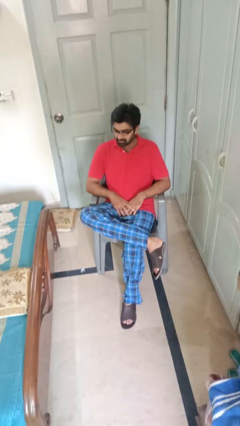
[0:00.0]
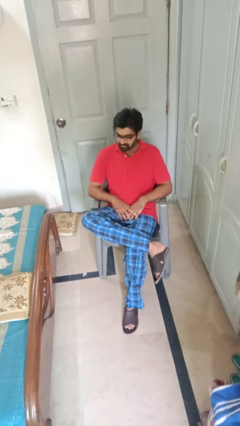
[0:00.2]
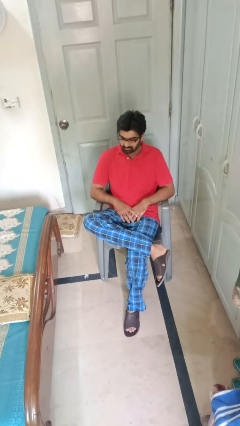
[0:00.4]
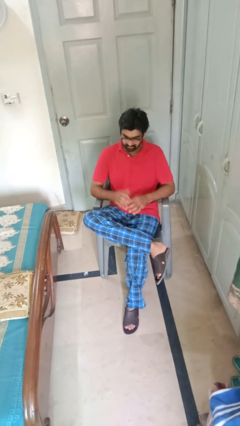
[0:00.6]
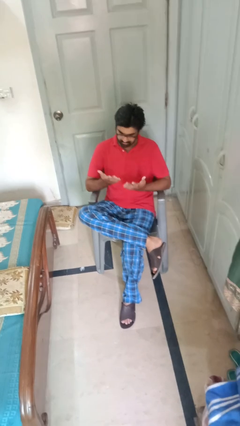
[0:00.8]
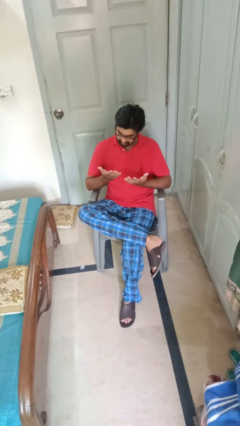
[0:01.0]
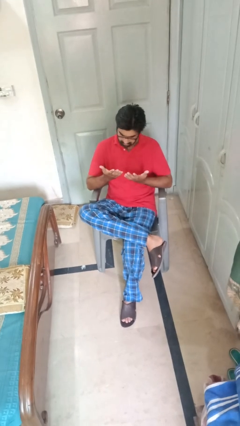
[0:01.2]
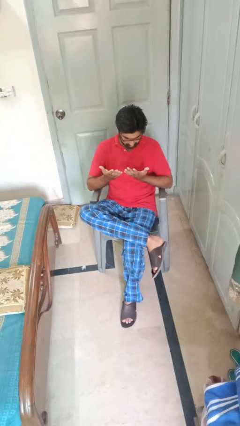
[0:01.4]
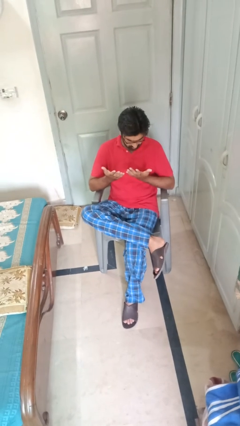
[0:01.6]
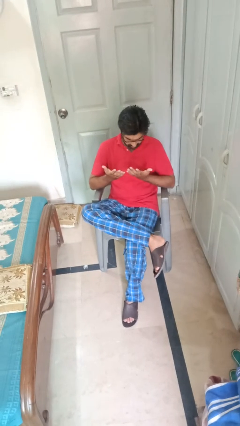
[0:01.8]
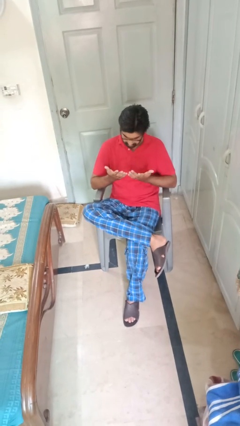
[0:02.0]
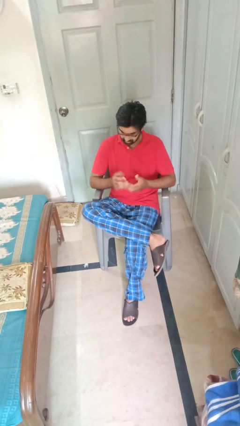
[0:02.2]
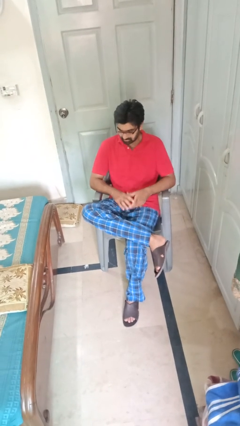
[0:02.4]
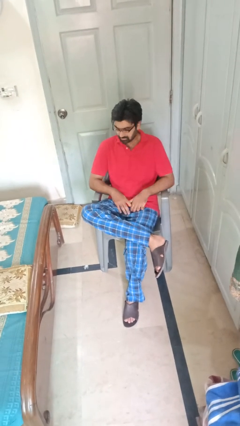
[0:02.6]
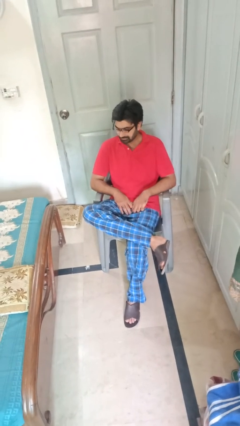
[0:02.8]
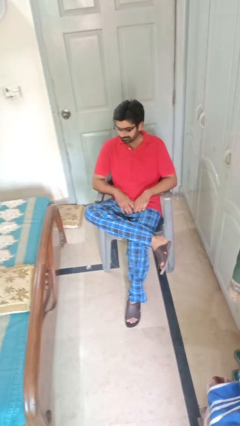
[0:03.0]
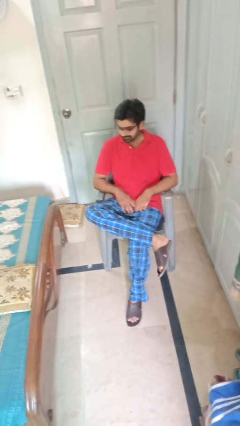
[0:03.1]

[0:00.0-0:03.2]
person looks at hands in lap

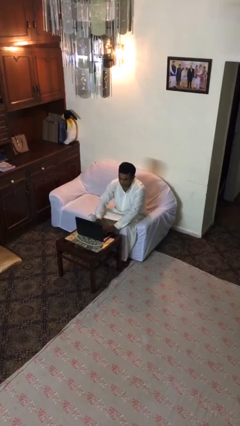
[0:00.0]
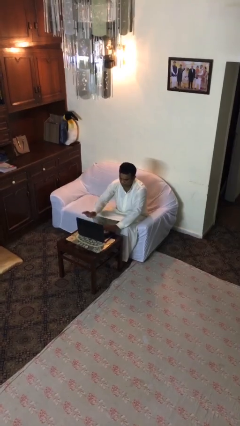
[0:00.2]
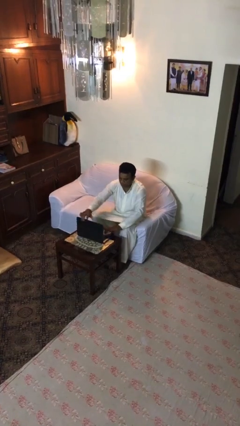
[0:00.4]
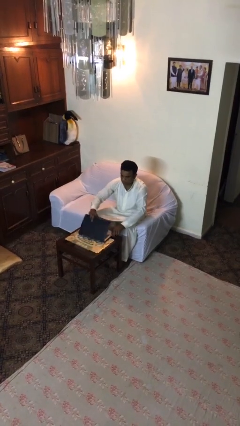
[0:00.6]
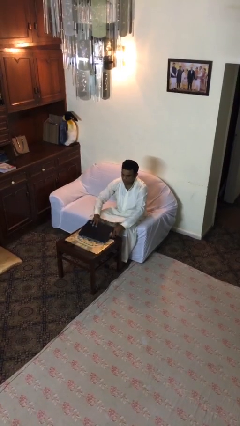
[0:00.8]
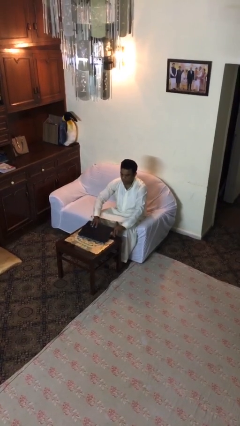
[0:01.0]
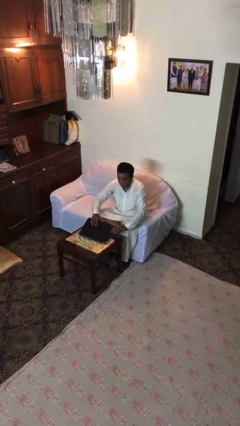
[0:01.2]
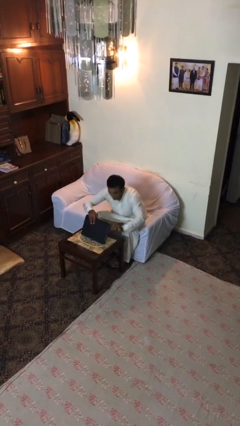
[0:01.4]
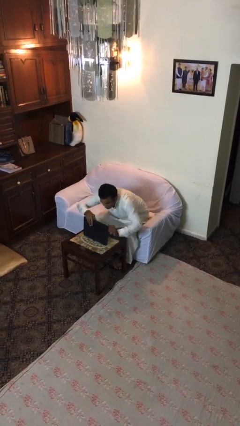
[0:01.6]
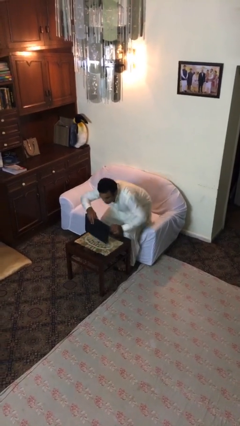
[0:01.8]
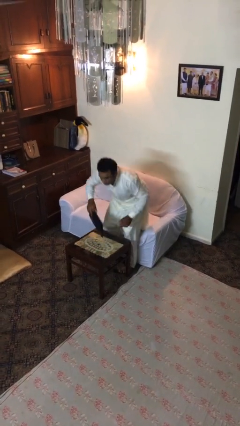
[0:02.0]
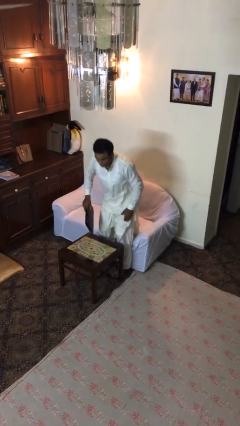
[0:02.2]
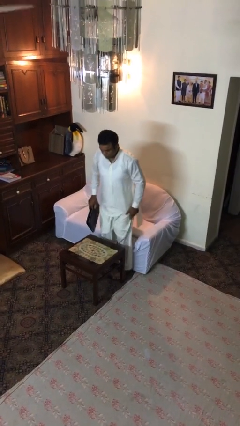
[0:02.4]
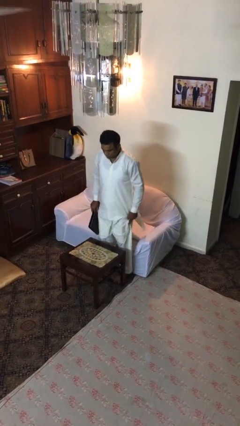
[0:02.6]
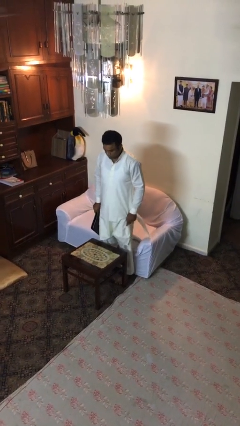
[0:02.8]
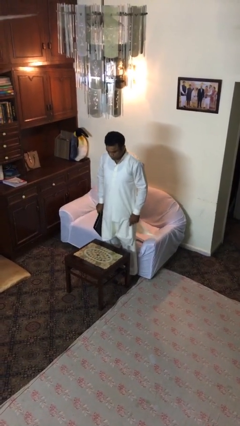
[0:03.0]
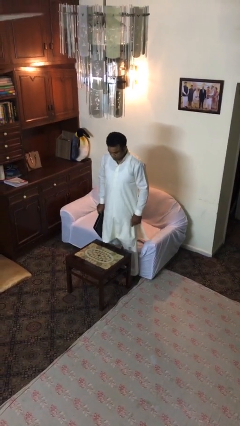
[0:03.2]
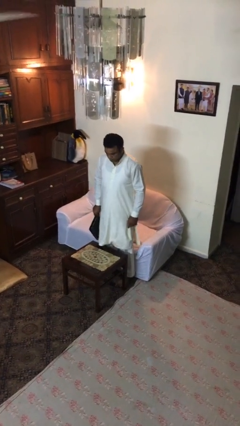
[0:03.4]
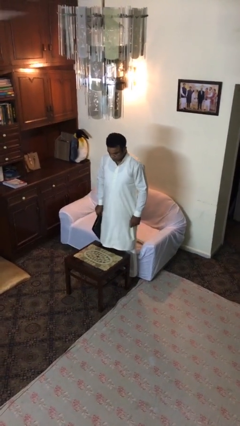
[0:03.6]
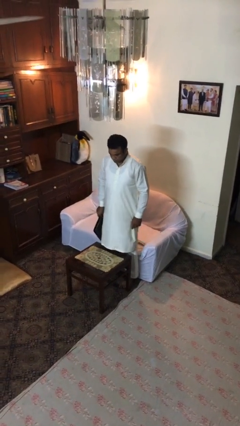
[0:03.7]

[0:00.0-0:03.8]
person stands up

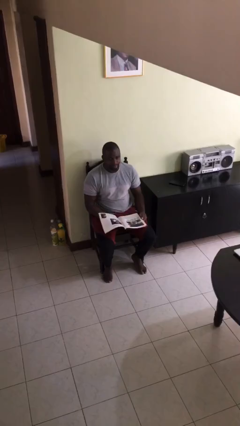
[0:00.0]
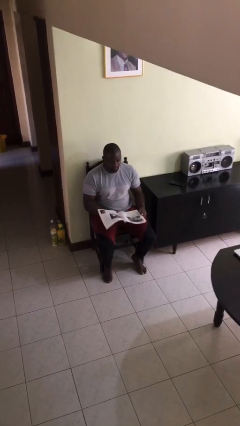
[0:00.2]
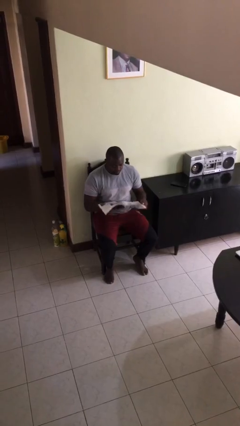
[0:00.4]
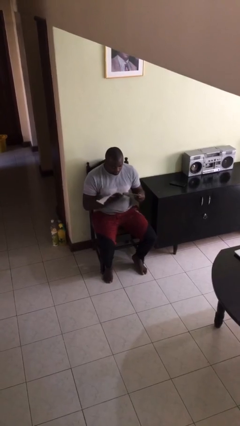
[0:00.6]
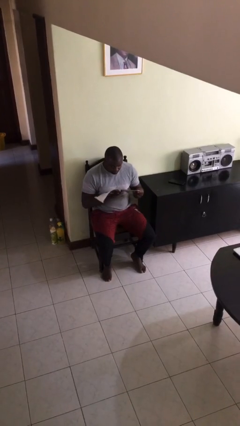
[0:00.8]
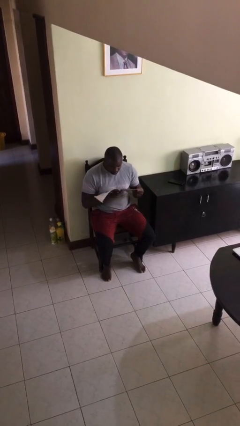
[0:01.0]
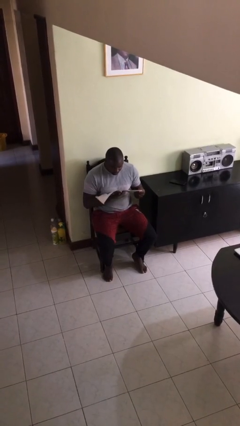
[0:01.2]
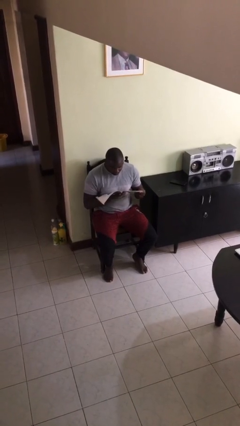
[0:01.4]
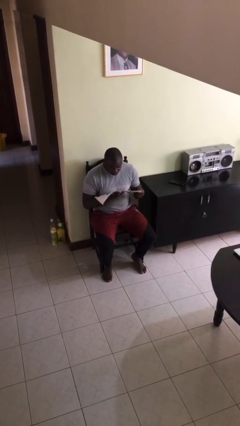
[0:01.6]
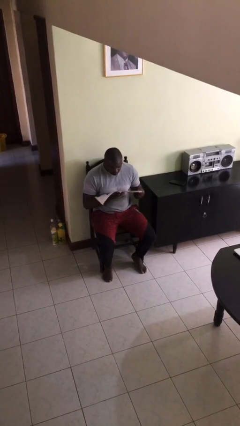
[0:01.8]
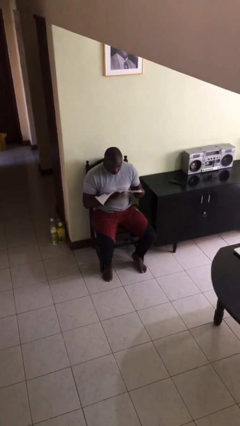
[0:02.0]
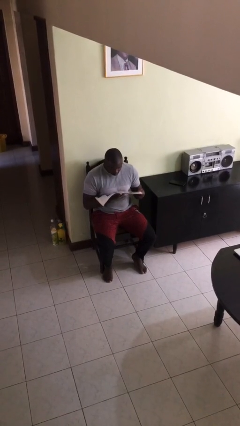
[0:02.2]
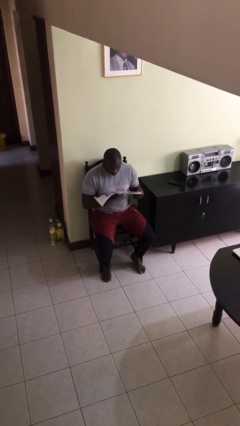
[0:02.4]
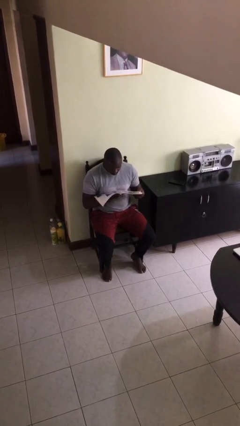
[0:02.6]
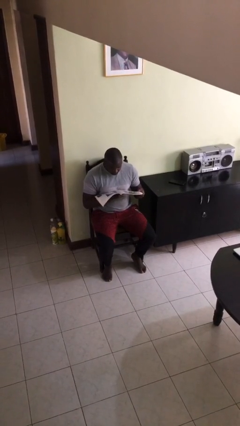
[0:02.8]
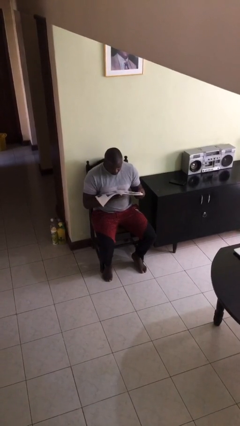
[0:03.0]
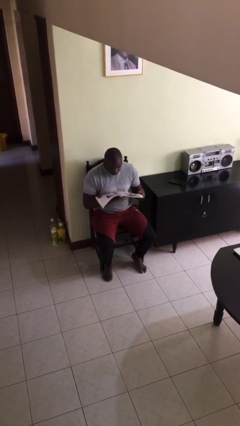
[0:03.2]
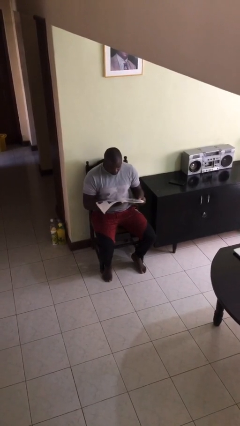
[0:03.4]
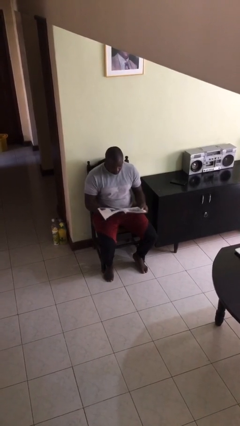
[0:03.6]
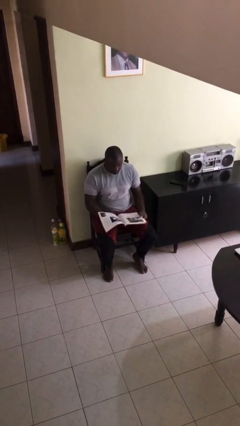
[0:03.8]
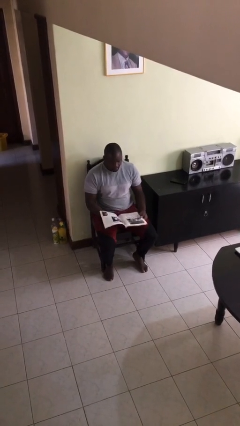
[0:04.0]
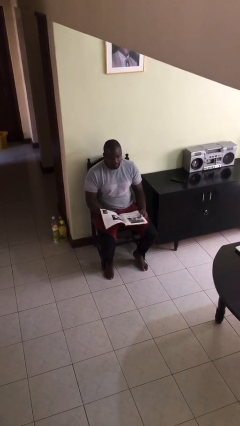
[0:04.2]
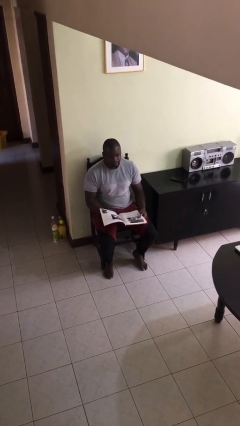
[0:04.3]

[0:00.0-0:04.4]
person reads document

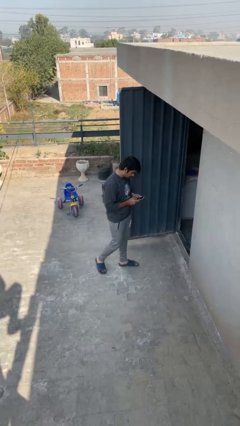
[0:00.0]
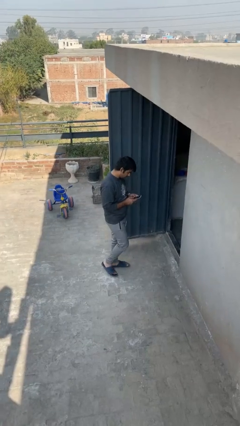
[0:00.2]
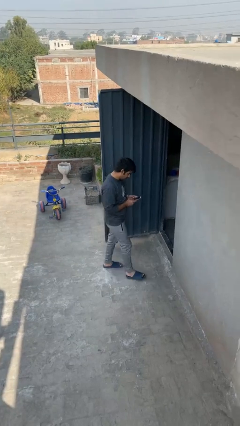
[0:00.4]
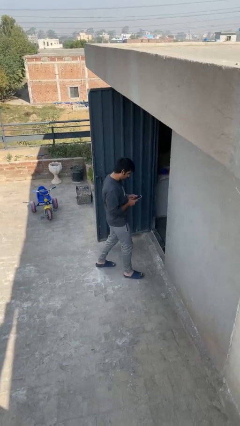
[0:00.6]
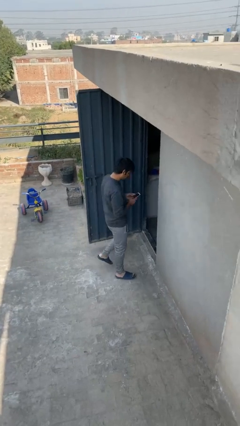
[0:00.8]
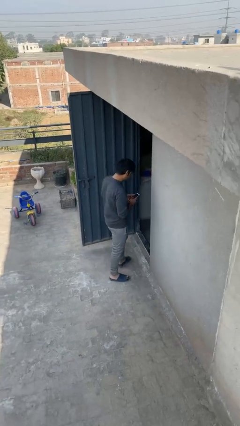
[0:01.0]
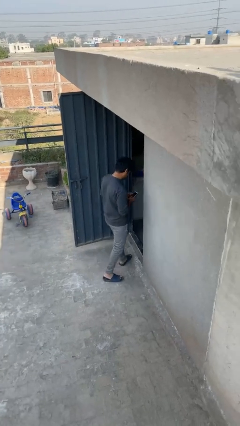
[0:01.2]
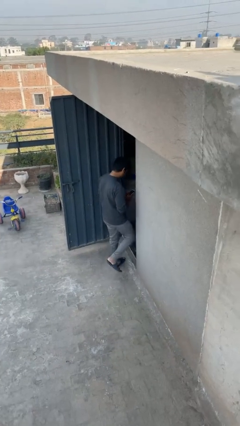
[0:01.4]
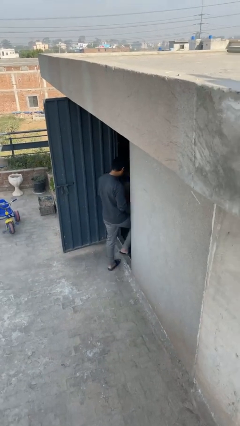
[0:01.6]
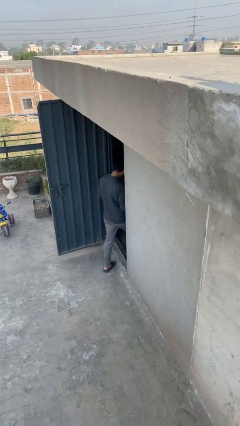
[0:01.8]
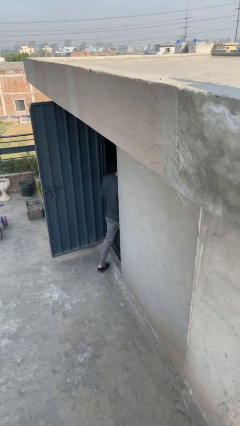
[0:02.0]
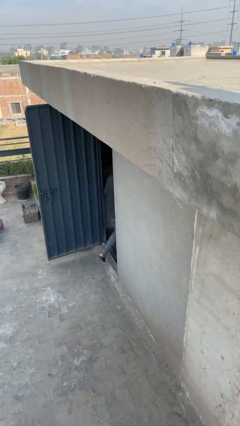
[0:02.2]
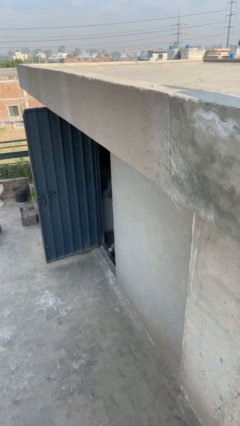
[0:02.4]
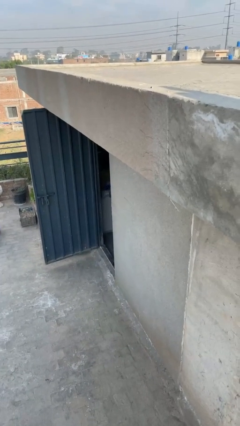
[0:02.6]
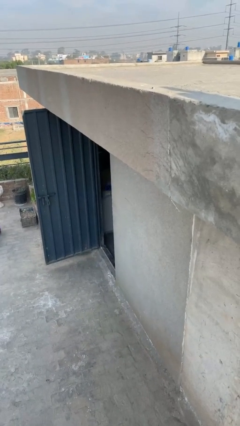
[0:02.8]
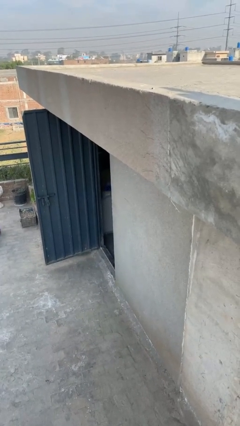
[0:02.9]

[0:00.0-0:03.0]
person exits scene through structure

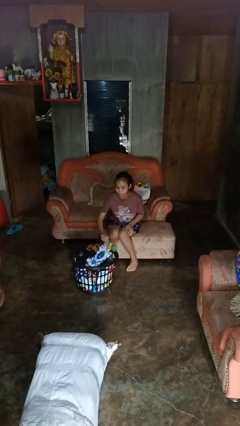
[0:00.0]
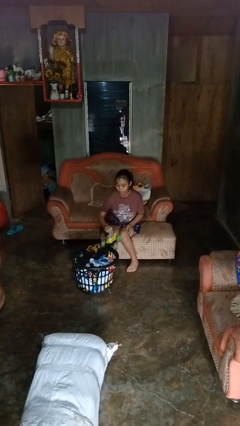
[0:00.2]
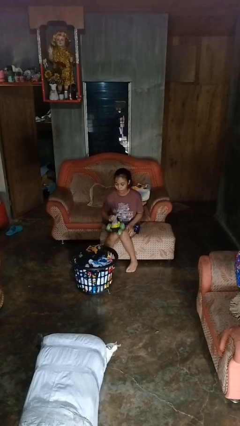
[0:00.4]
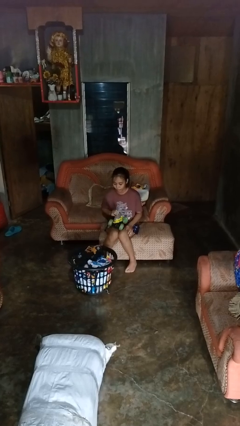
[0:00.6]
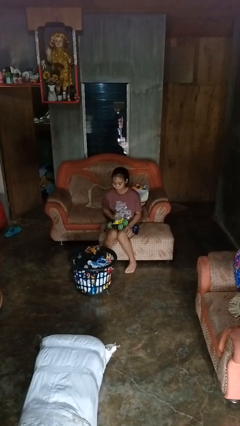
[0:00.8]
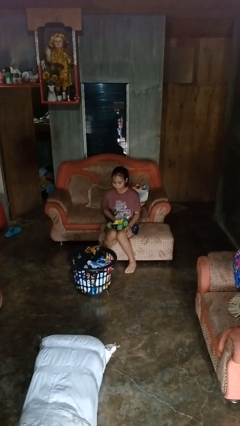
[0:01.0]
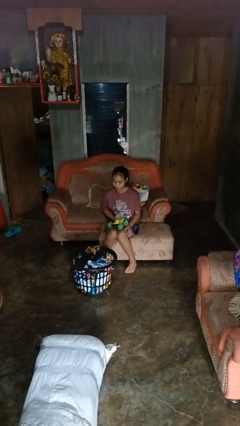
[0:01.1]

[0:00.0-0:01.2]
person takes object from basket

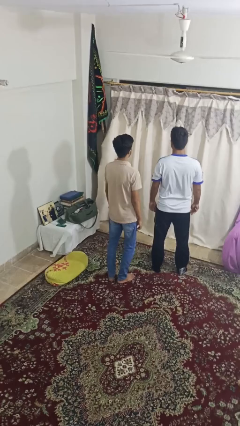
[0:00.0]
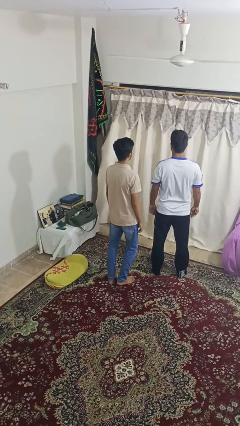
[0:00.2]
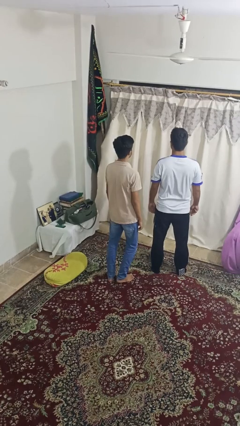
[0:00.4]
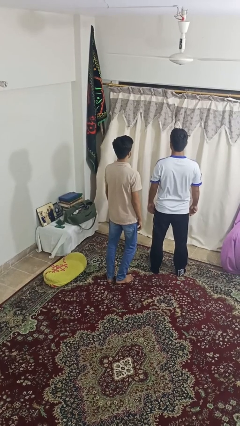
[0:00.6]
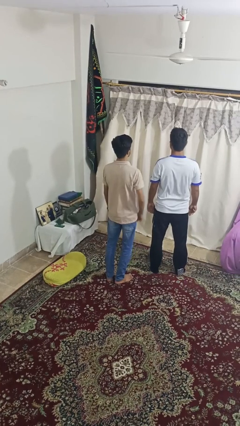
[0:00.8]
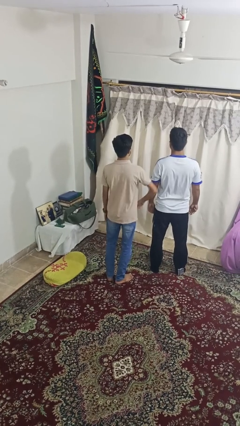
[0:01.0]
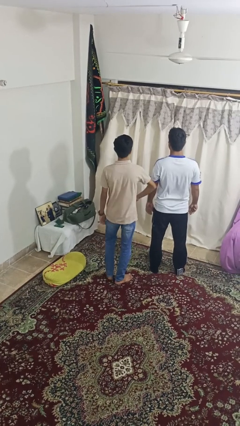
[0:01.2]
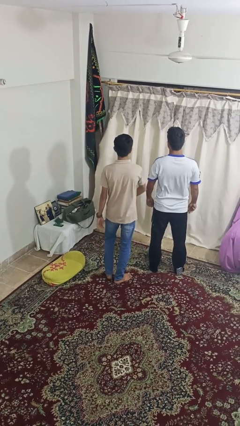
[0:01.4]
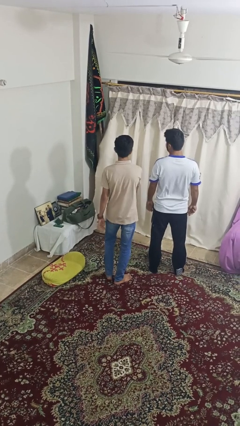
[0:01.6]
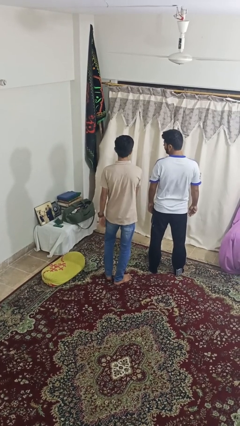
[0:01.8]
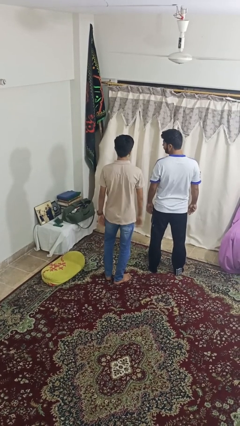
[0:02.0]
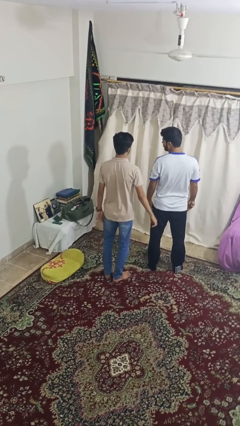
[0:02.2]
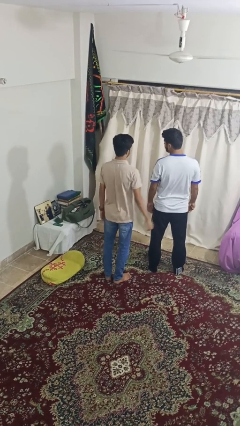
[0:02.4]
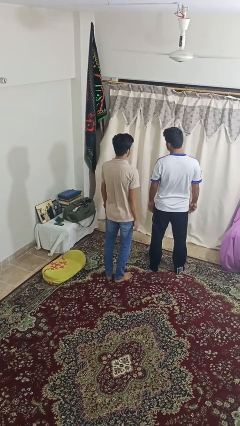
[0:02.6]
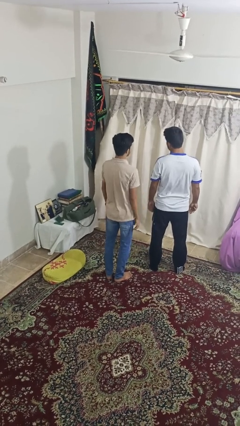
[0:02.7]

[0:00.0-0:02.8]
person nudges person with elbow
